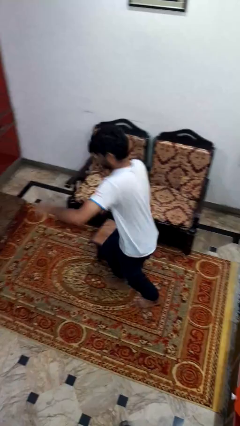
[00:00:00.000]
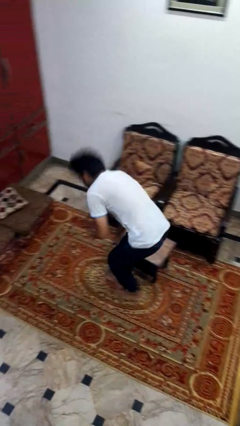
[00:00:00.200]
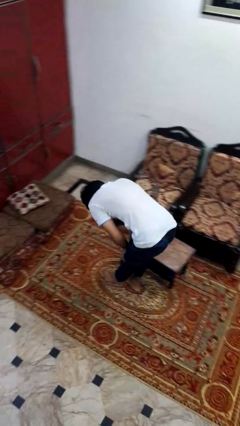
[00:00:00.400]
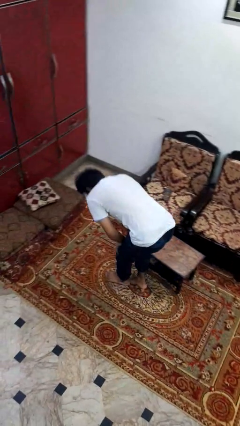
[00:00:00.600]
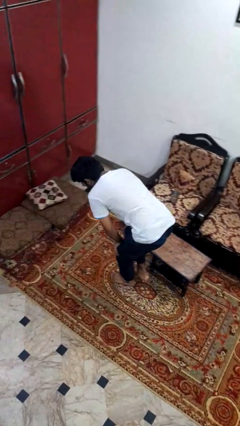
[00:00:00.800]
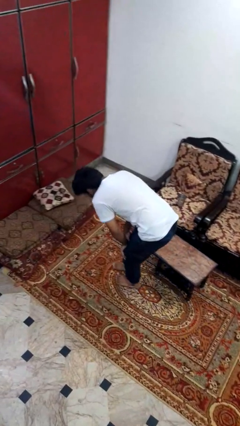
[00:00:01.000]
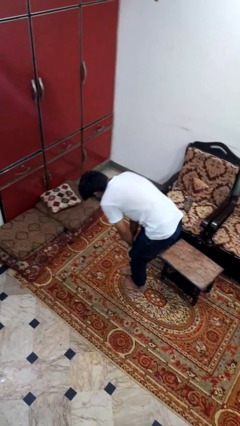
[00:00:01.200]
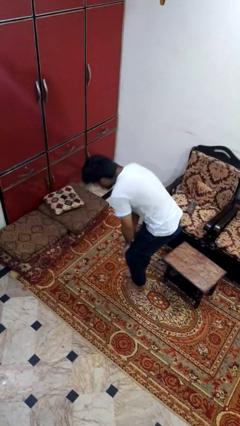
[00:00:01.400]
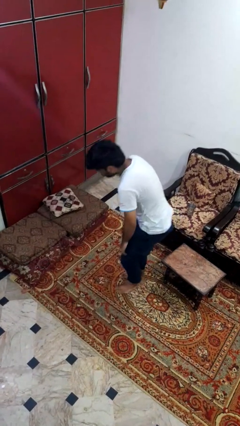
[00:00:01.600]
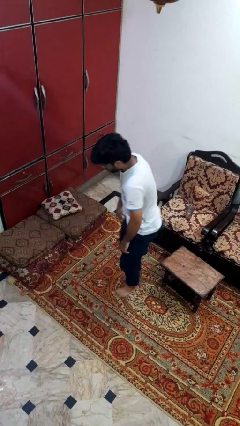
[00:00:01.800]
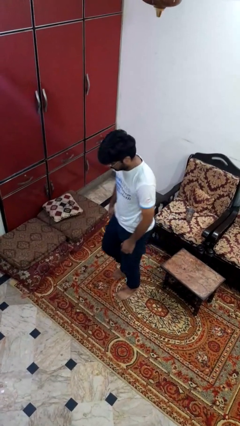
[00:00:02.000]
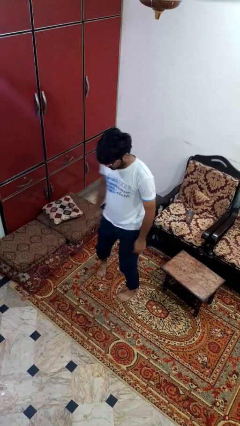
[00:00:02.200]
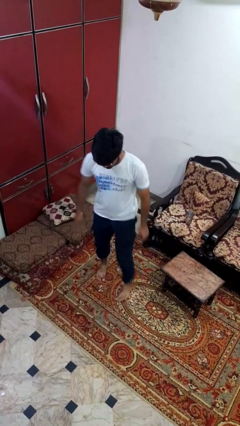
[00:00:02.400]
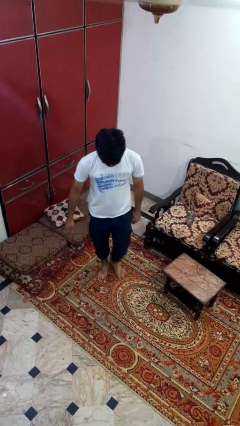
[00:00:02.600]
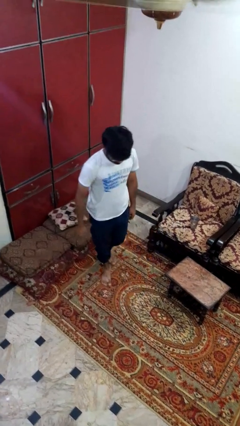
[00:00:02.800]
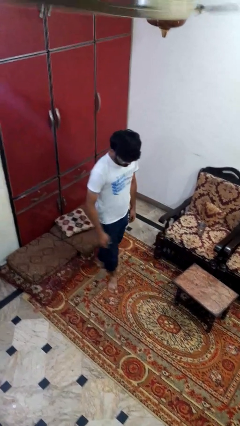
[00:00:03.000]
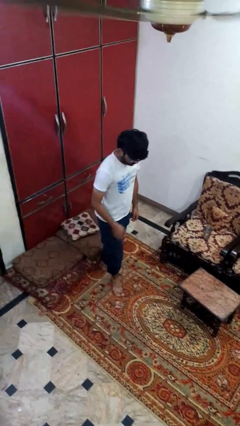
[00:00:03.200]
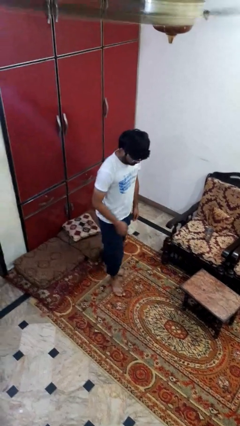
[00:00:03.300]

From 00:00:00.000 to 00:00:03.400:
person bumps into table

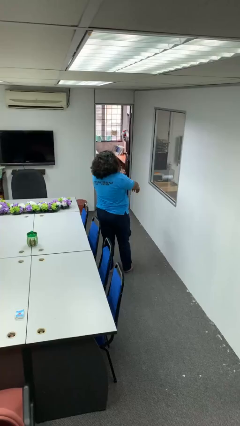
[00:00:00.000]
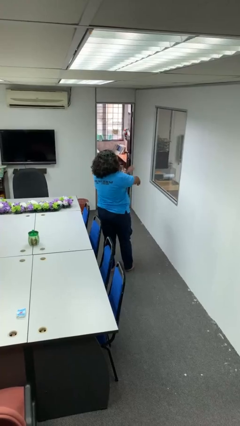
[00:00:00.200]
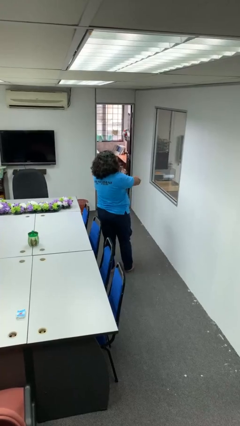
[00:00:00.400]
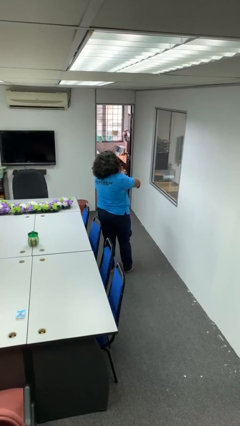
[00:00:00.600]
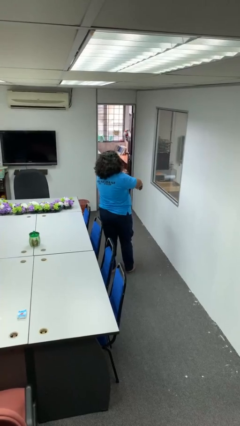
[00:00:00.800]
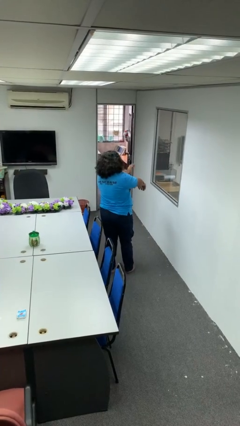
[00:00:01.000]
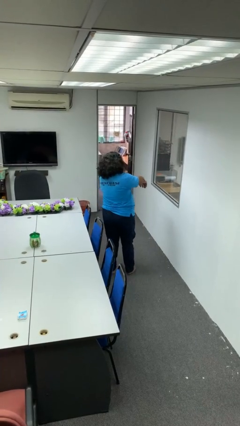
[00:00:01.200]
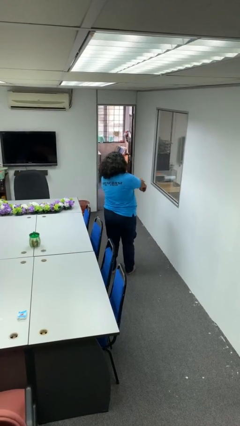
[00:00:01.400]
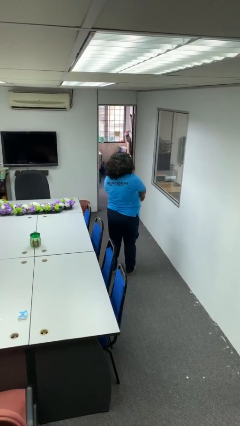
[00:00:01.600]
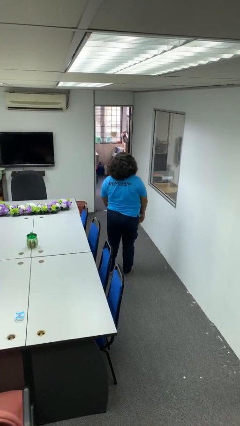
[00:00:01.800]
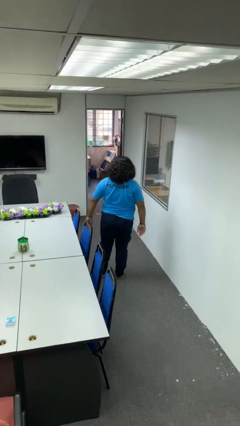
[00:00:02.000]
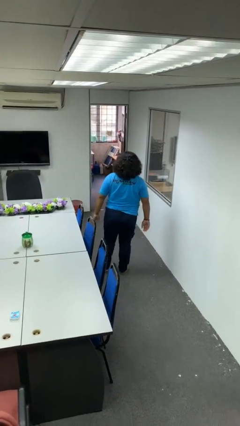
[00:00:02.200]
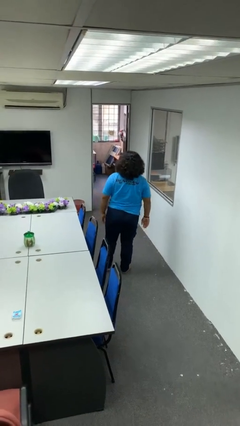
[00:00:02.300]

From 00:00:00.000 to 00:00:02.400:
person swats bug

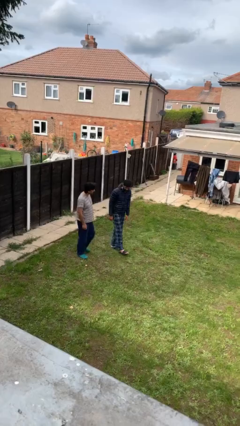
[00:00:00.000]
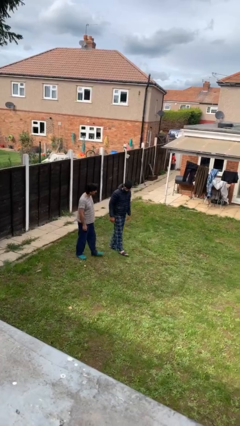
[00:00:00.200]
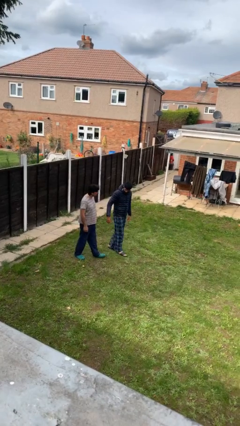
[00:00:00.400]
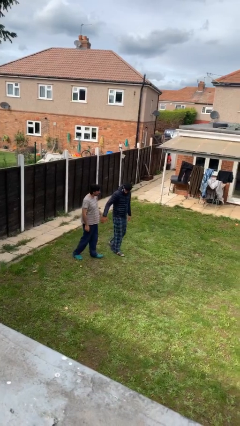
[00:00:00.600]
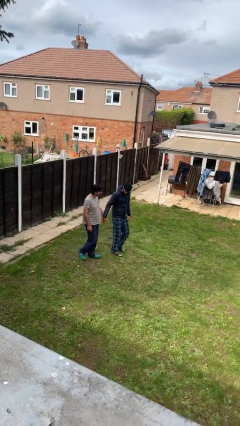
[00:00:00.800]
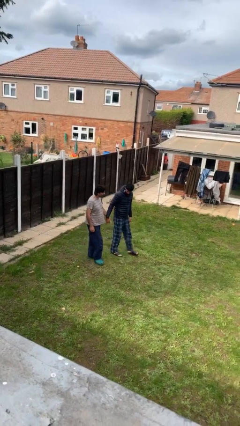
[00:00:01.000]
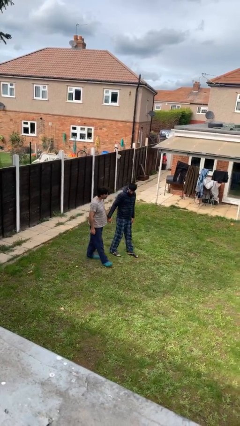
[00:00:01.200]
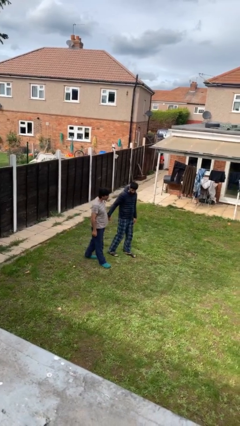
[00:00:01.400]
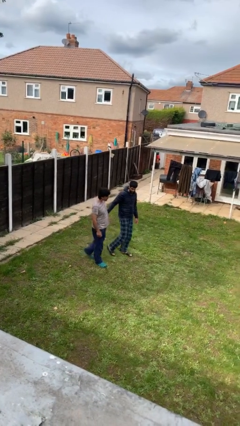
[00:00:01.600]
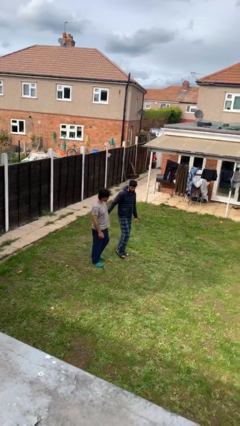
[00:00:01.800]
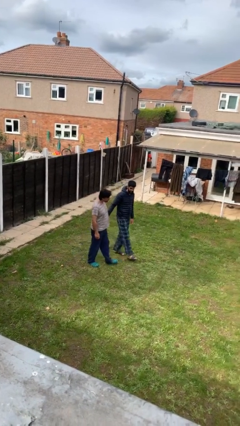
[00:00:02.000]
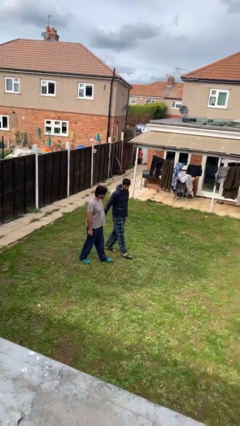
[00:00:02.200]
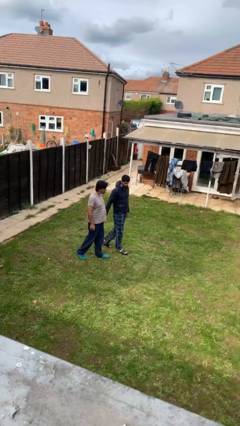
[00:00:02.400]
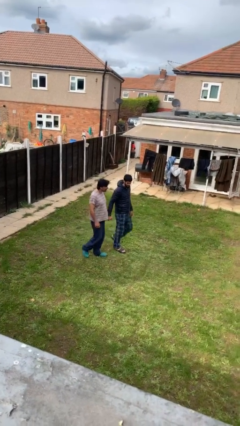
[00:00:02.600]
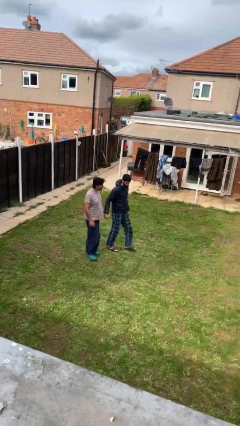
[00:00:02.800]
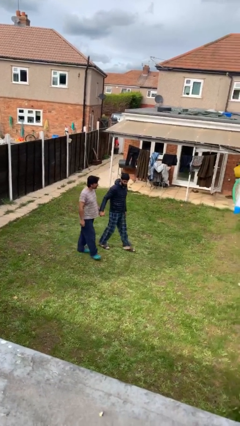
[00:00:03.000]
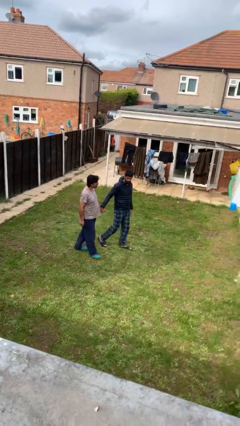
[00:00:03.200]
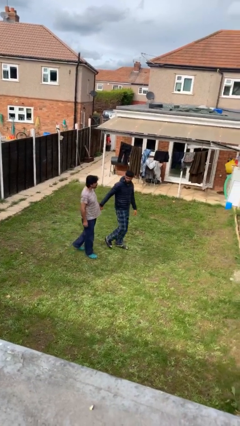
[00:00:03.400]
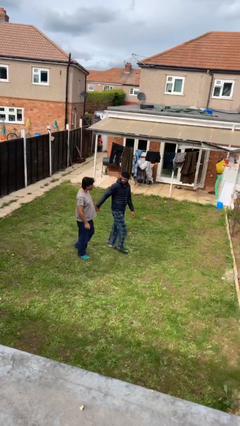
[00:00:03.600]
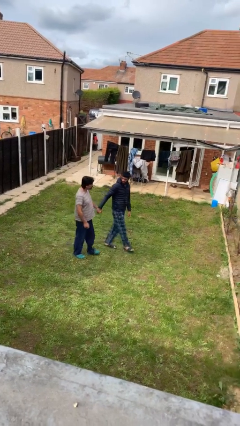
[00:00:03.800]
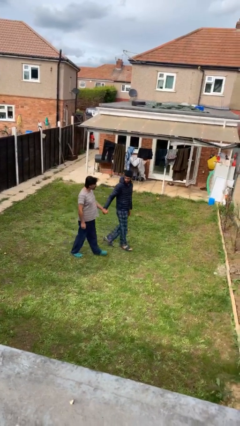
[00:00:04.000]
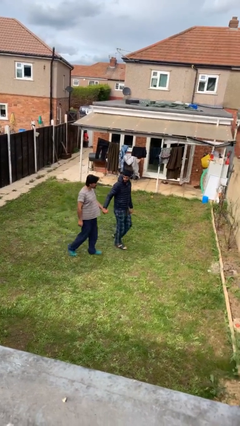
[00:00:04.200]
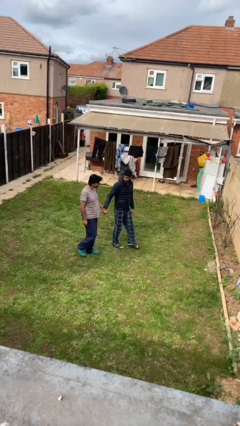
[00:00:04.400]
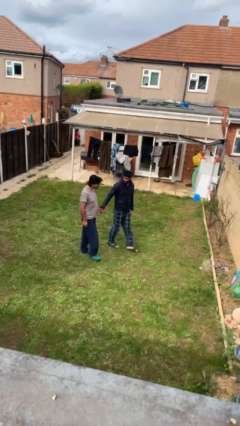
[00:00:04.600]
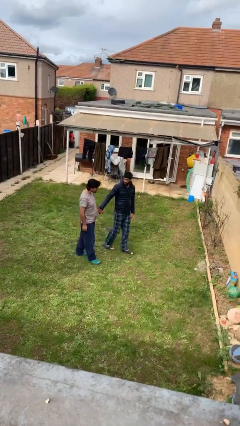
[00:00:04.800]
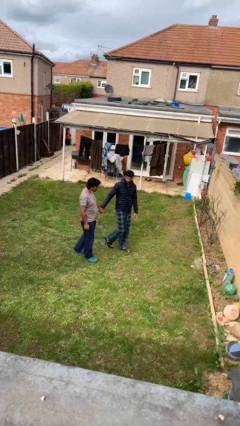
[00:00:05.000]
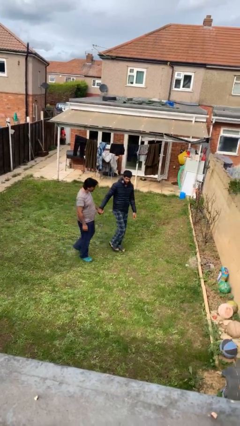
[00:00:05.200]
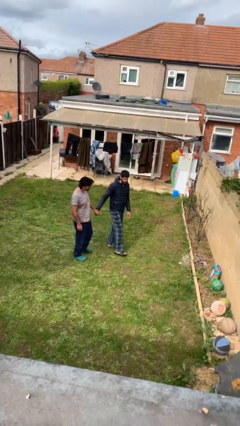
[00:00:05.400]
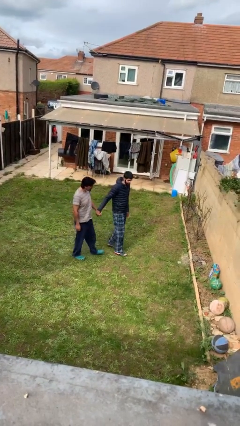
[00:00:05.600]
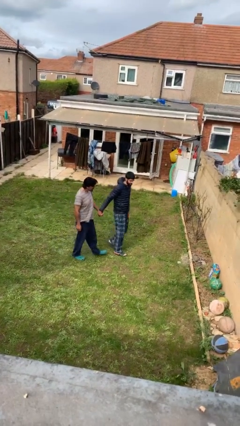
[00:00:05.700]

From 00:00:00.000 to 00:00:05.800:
person holds hand

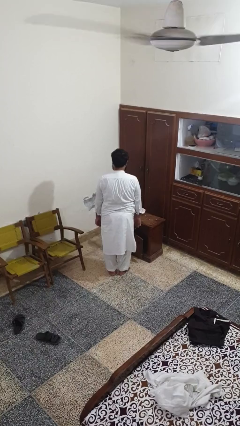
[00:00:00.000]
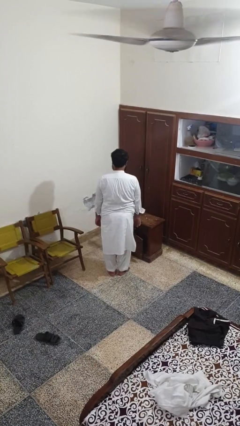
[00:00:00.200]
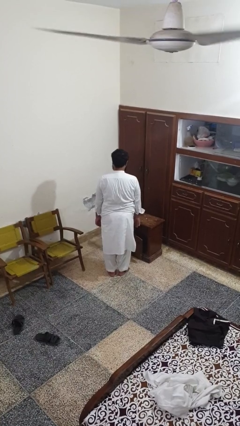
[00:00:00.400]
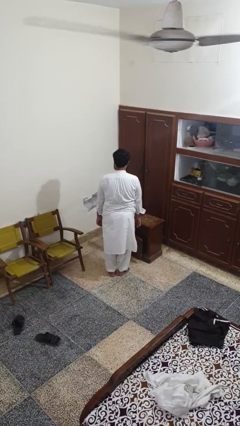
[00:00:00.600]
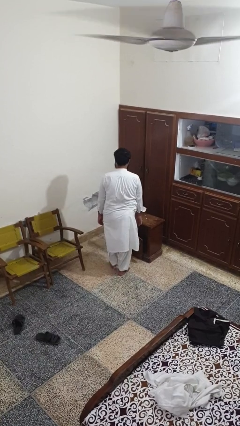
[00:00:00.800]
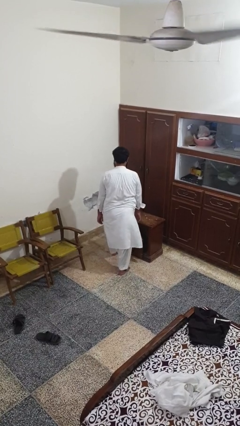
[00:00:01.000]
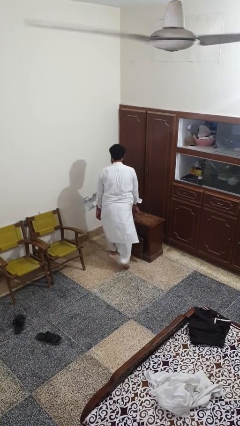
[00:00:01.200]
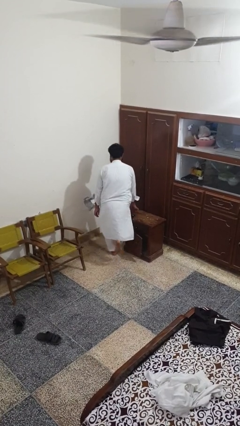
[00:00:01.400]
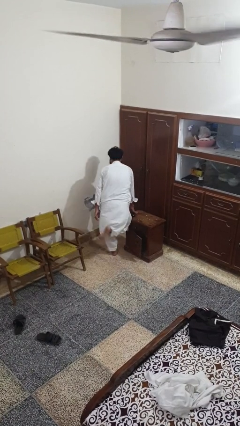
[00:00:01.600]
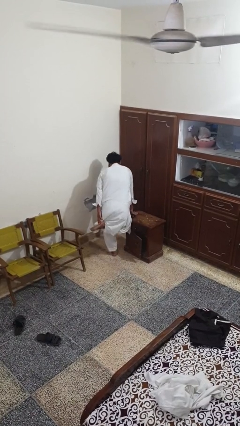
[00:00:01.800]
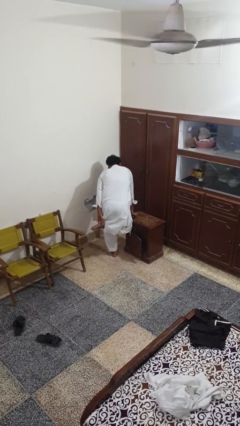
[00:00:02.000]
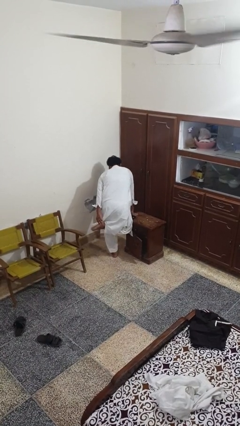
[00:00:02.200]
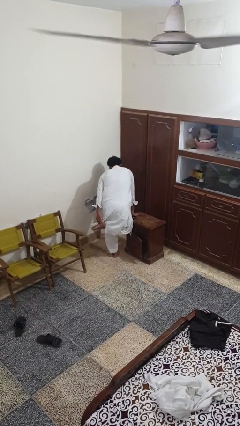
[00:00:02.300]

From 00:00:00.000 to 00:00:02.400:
person stubs toe

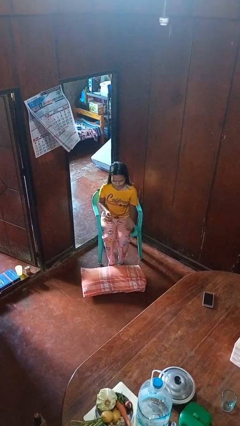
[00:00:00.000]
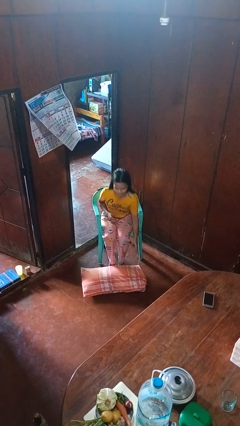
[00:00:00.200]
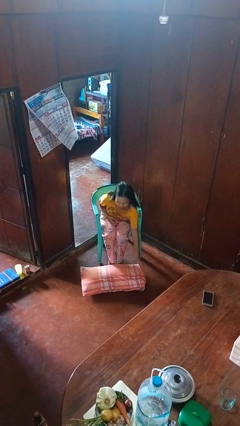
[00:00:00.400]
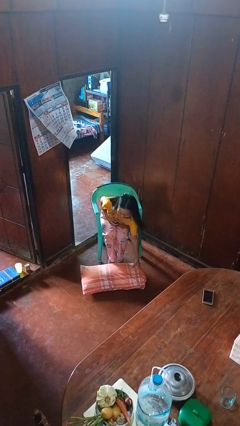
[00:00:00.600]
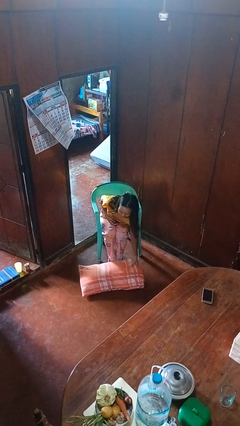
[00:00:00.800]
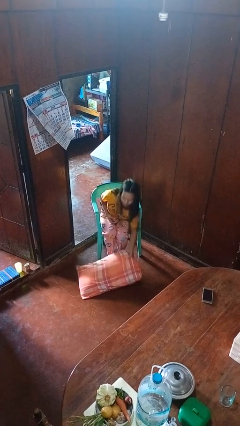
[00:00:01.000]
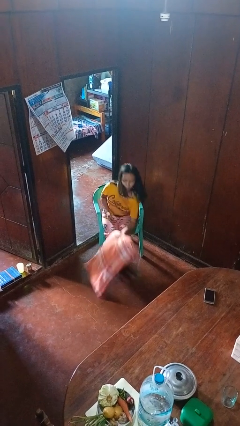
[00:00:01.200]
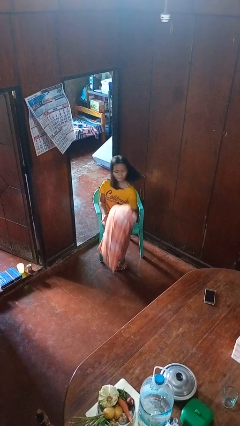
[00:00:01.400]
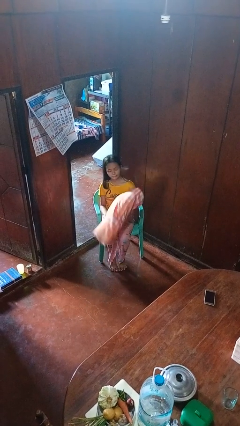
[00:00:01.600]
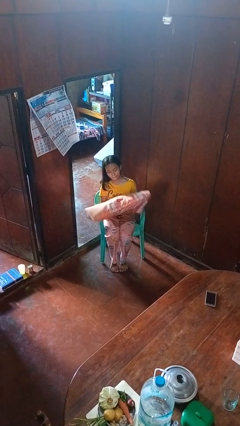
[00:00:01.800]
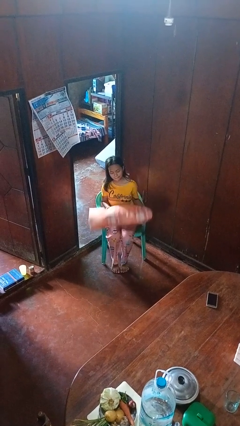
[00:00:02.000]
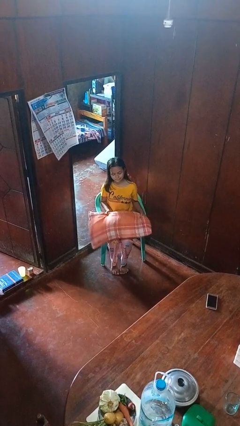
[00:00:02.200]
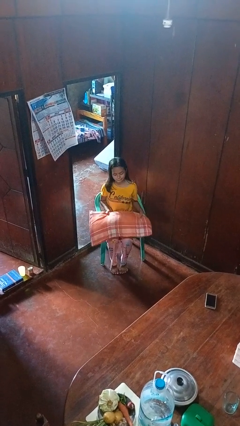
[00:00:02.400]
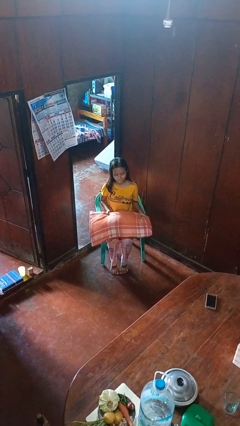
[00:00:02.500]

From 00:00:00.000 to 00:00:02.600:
person picks up object from floor

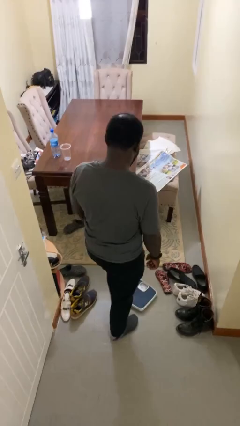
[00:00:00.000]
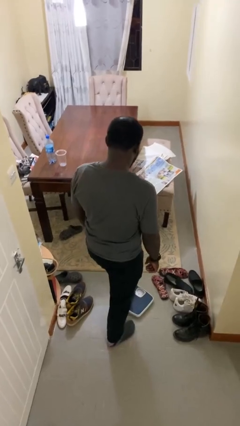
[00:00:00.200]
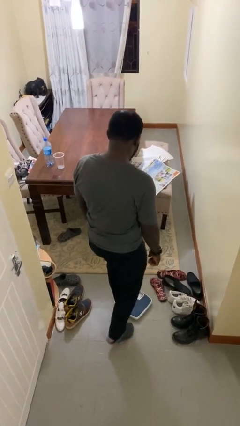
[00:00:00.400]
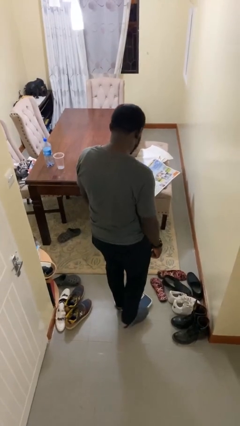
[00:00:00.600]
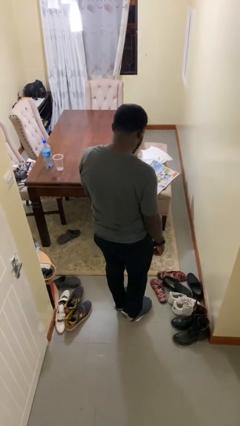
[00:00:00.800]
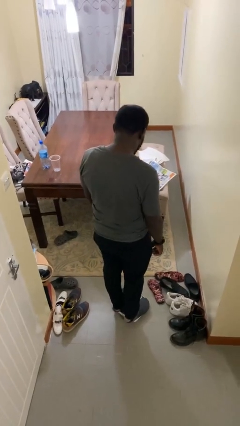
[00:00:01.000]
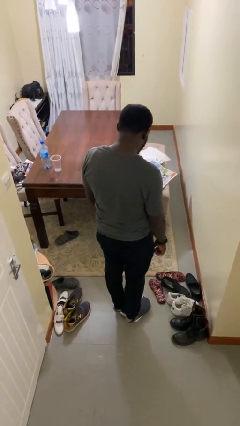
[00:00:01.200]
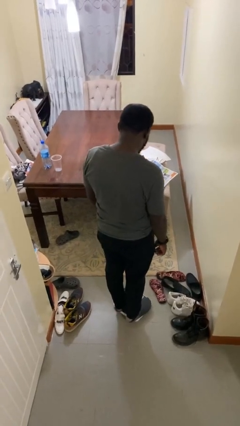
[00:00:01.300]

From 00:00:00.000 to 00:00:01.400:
person uses bodyweight scale
